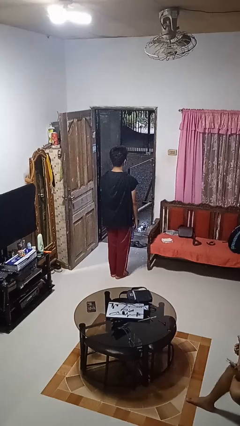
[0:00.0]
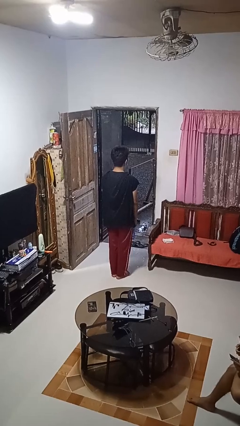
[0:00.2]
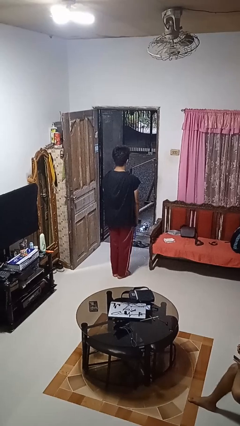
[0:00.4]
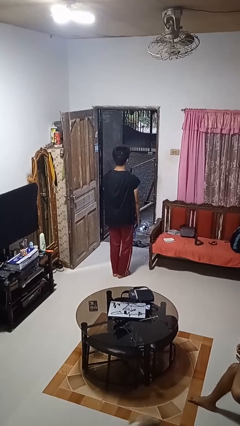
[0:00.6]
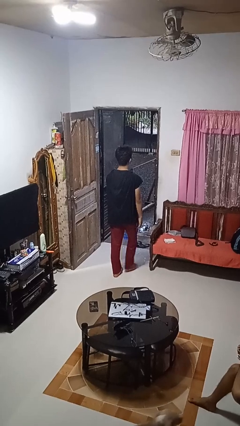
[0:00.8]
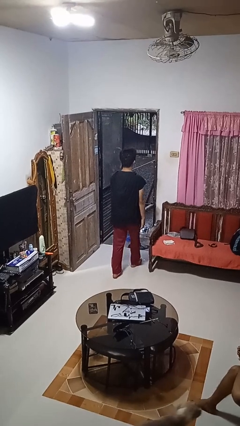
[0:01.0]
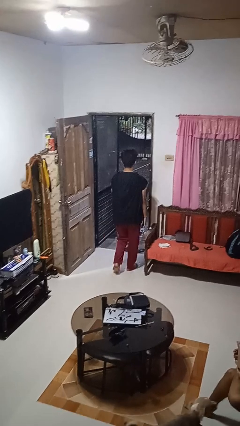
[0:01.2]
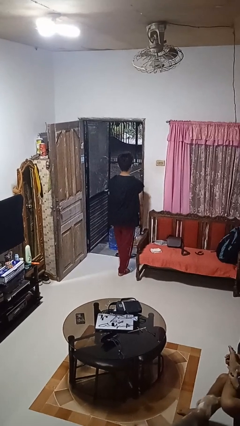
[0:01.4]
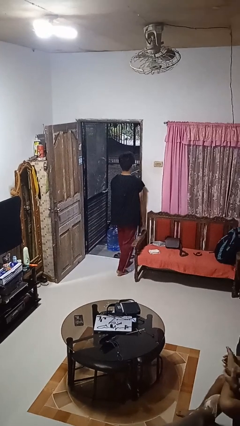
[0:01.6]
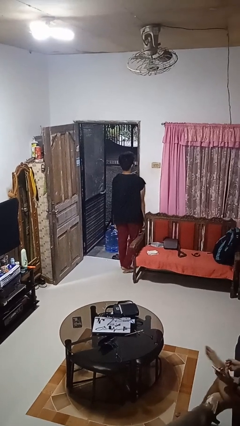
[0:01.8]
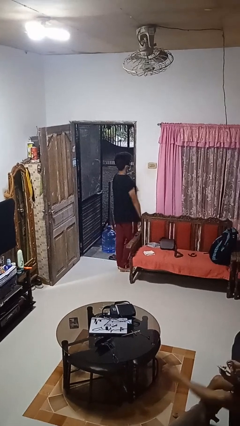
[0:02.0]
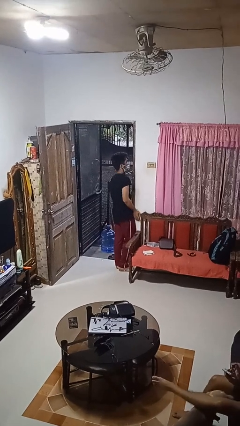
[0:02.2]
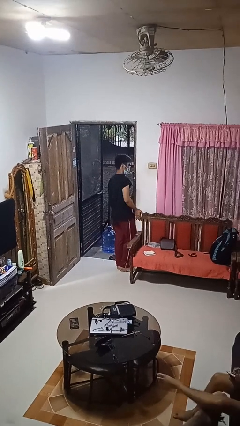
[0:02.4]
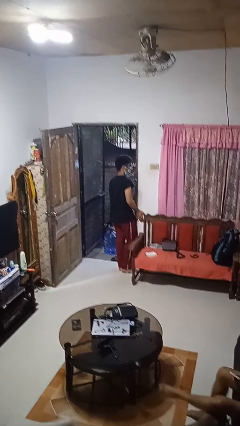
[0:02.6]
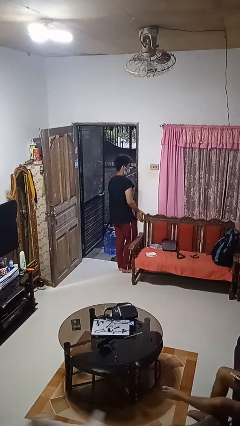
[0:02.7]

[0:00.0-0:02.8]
person bumps into wall

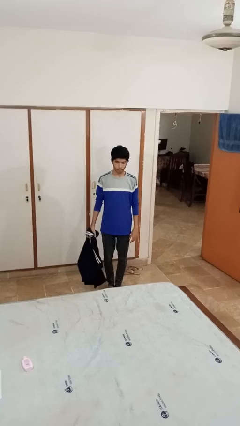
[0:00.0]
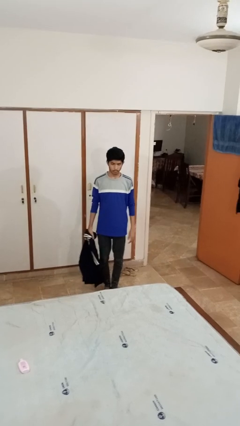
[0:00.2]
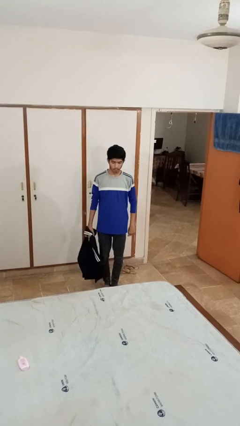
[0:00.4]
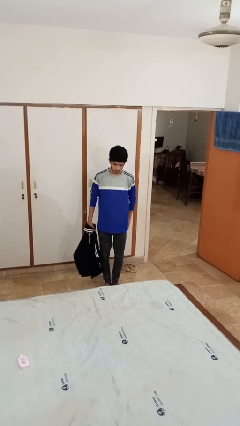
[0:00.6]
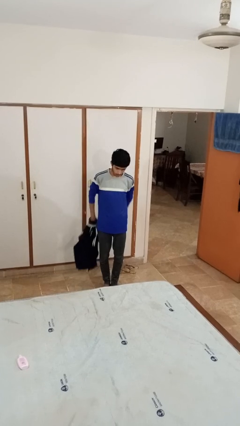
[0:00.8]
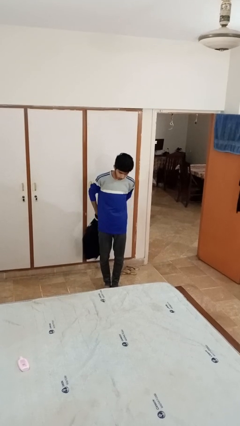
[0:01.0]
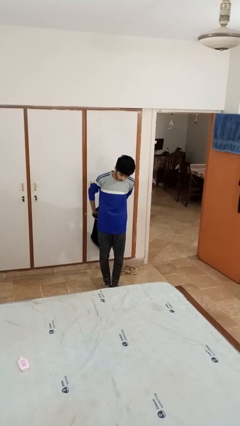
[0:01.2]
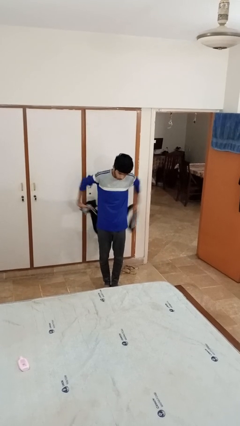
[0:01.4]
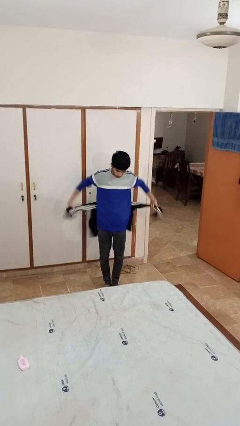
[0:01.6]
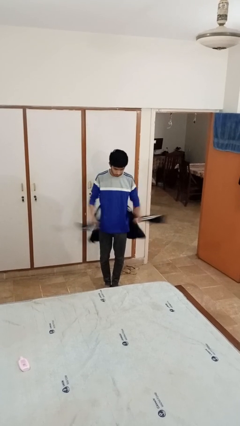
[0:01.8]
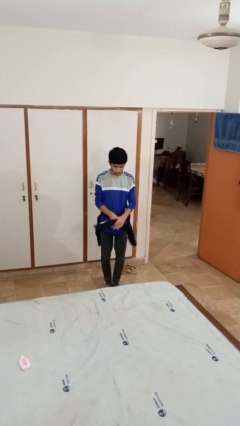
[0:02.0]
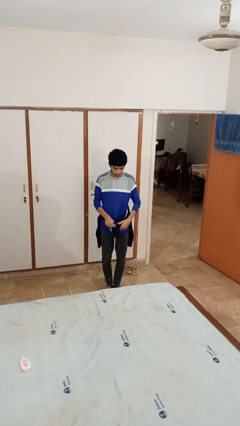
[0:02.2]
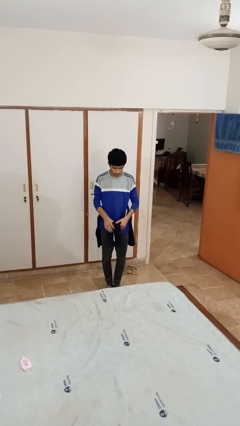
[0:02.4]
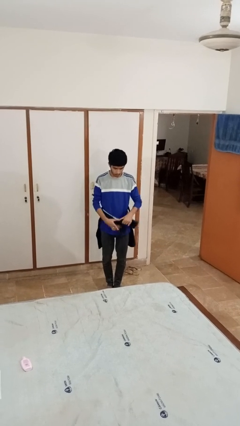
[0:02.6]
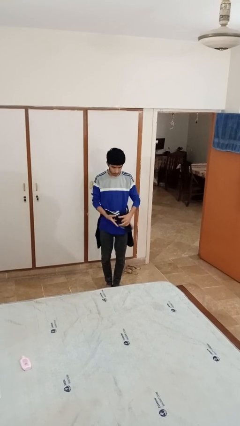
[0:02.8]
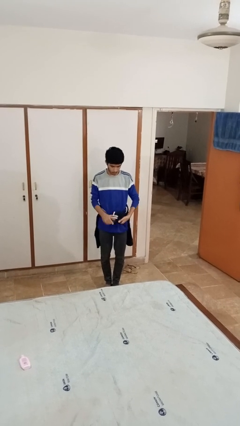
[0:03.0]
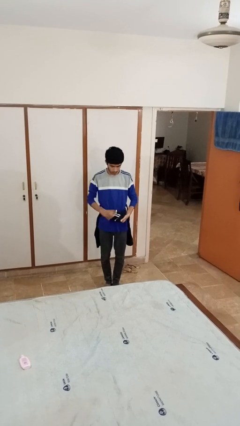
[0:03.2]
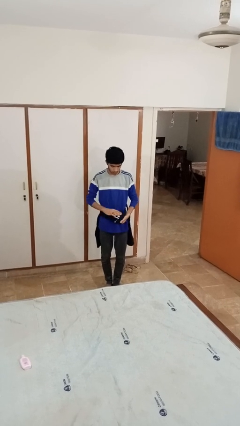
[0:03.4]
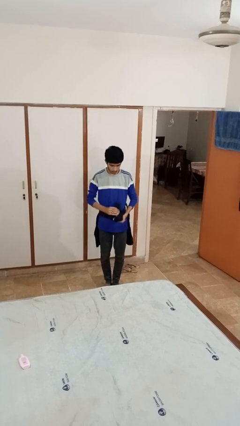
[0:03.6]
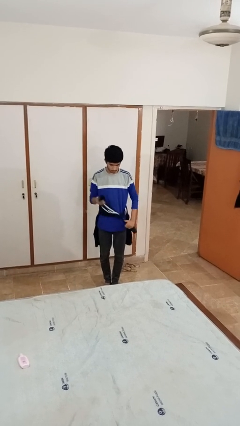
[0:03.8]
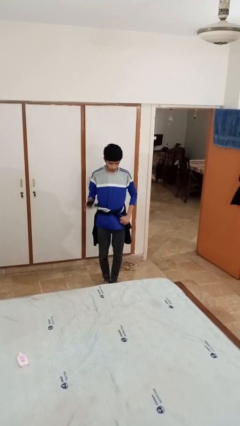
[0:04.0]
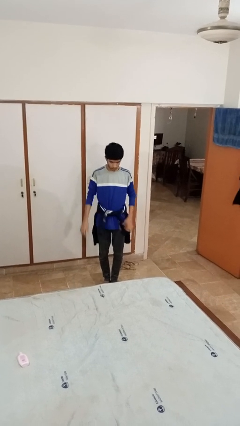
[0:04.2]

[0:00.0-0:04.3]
person ties jacket around waist

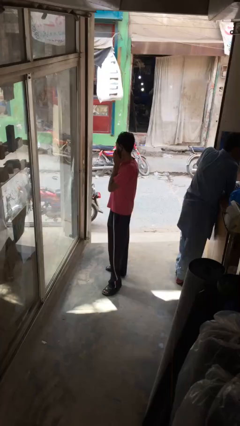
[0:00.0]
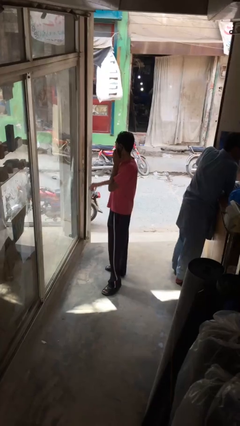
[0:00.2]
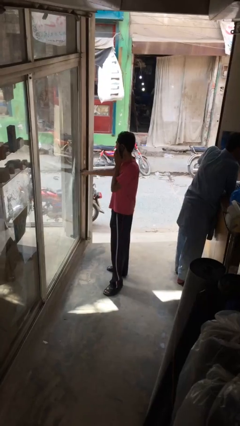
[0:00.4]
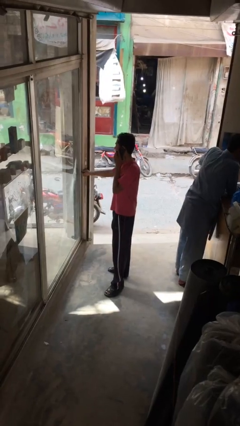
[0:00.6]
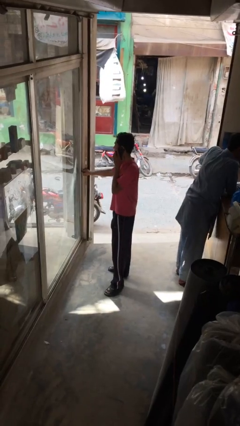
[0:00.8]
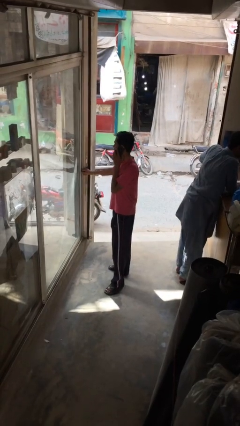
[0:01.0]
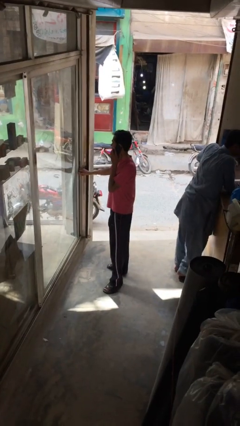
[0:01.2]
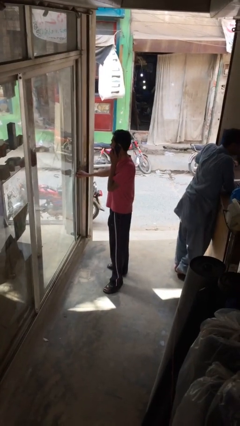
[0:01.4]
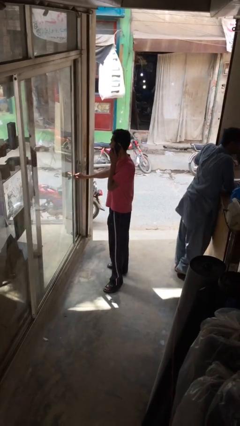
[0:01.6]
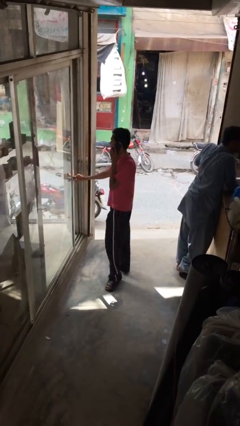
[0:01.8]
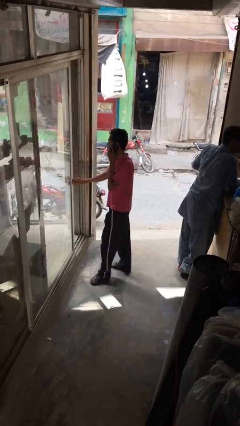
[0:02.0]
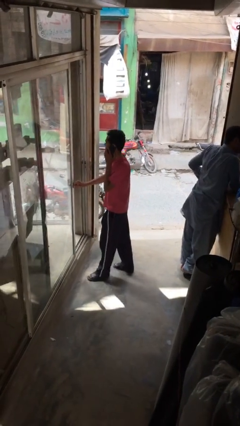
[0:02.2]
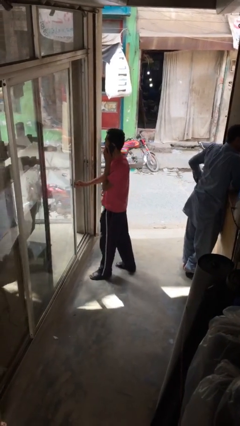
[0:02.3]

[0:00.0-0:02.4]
person opens facility door

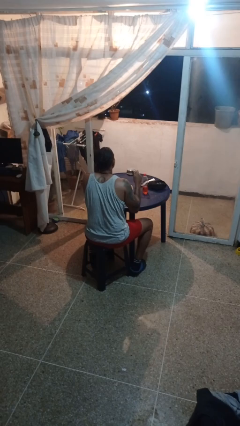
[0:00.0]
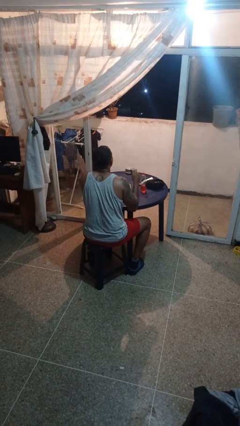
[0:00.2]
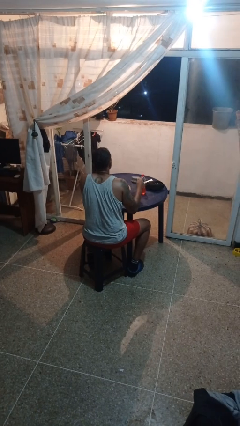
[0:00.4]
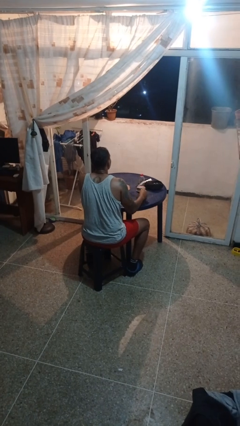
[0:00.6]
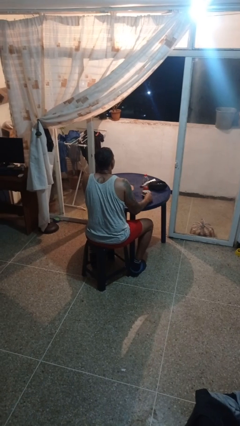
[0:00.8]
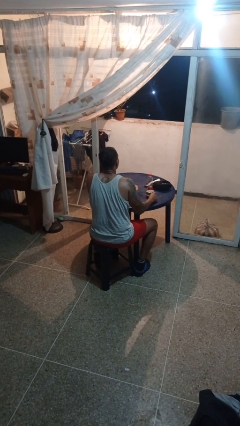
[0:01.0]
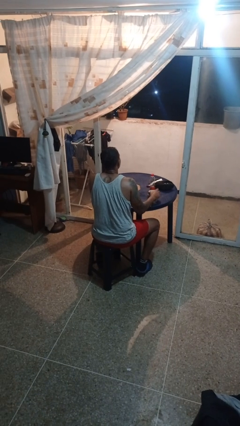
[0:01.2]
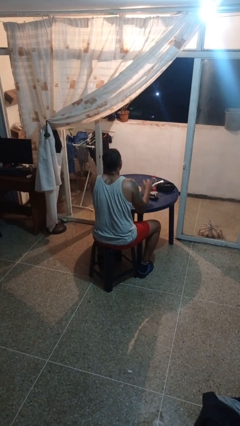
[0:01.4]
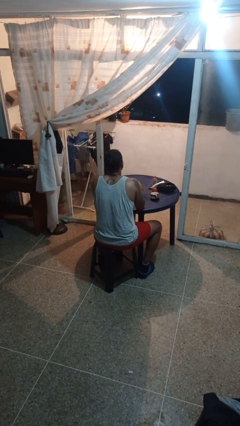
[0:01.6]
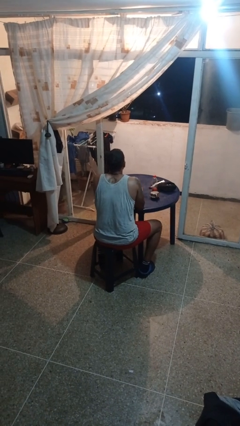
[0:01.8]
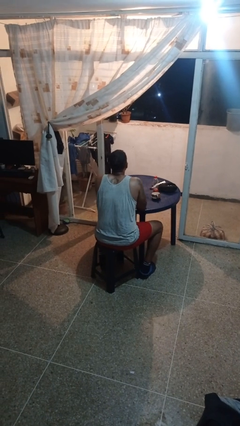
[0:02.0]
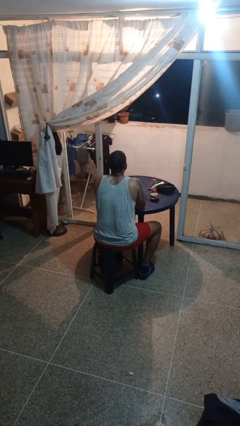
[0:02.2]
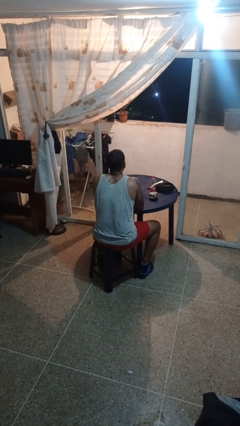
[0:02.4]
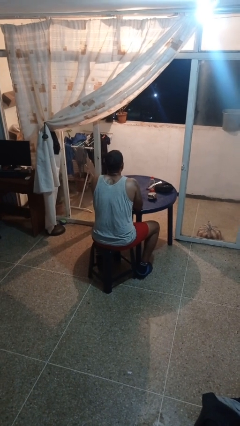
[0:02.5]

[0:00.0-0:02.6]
person puts down object on table

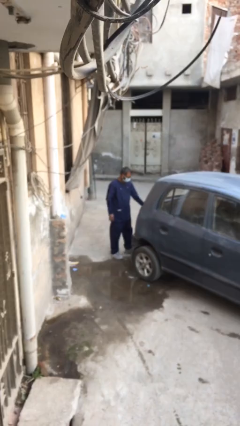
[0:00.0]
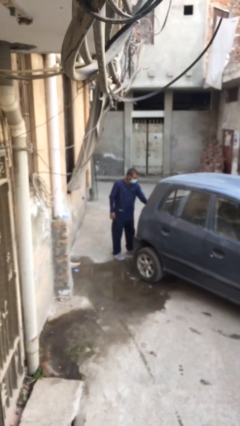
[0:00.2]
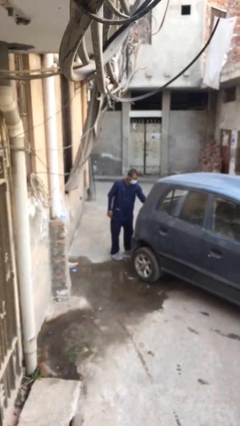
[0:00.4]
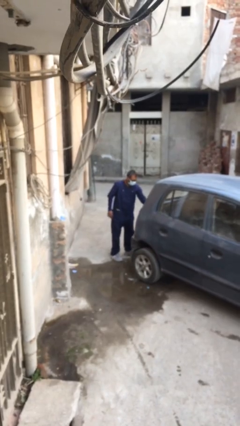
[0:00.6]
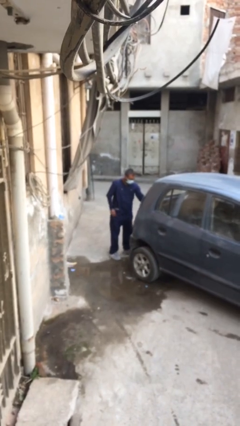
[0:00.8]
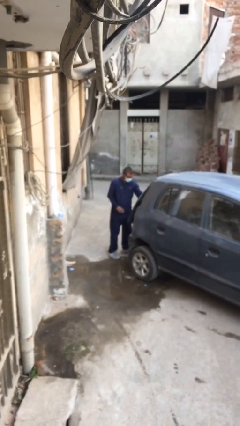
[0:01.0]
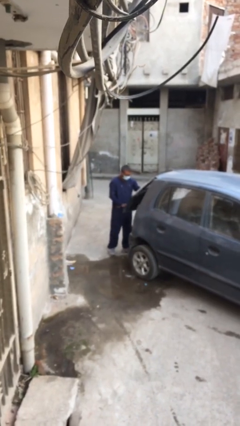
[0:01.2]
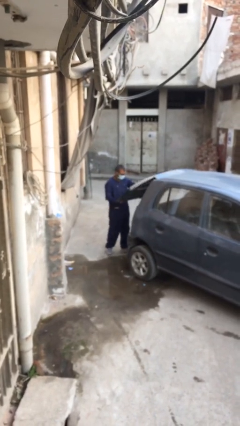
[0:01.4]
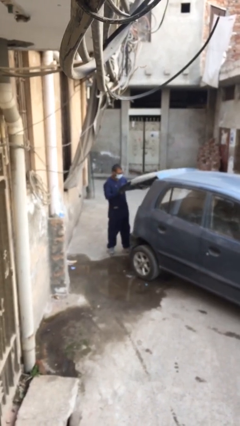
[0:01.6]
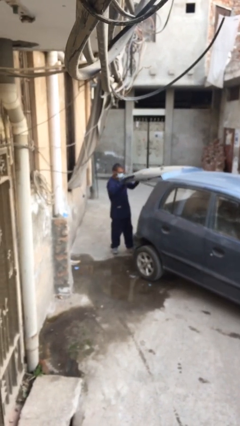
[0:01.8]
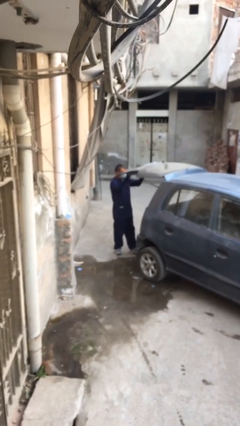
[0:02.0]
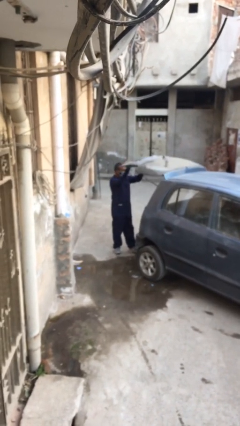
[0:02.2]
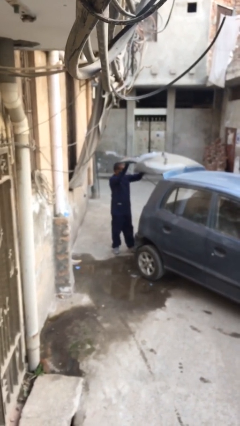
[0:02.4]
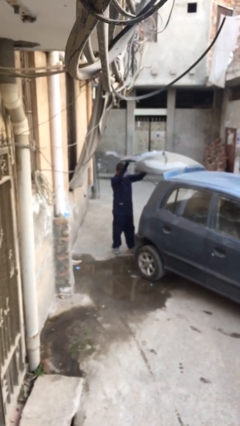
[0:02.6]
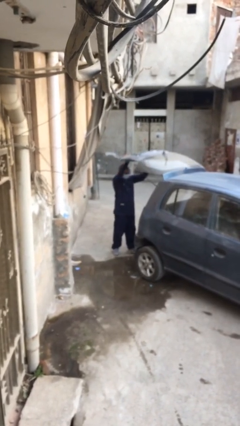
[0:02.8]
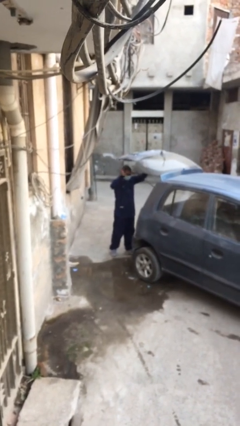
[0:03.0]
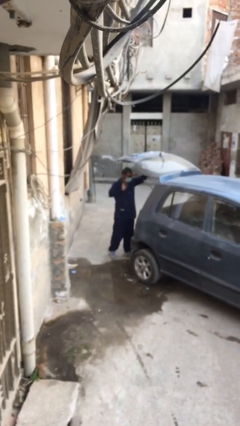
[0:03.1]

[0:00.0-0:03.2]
person opens car trunk

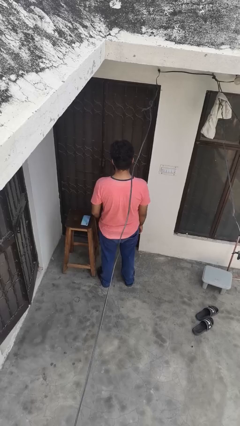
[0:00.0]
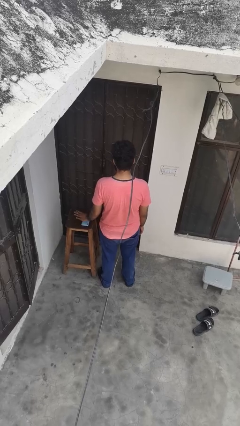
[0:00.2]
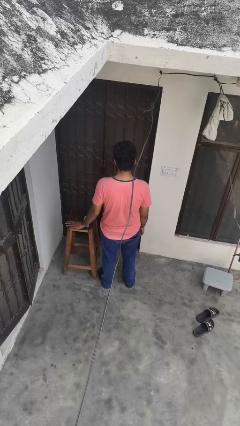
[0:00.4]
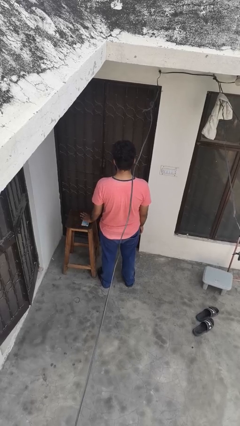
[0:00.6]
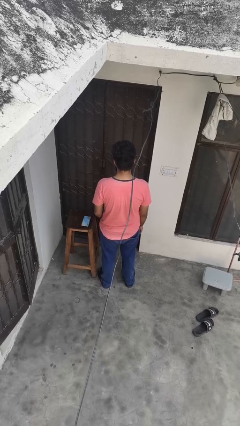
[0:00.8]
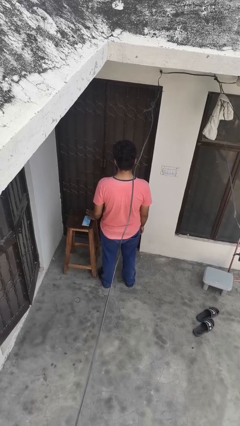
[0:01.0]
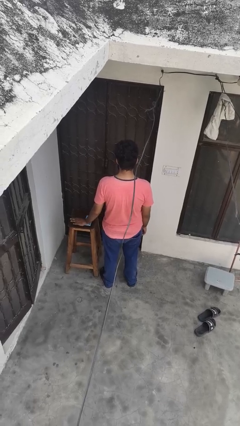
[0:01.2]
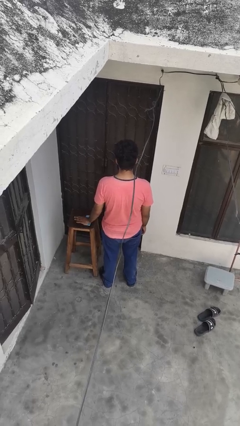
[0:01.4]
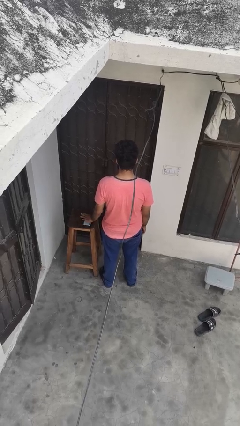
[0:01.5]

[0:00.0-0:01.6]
person waves hand over object

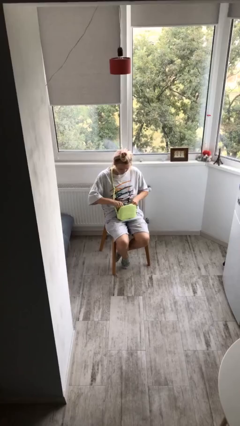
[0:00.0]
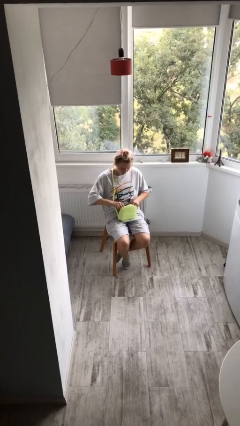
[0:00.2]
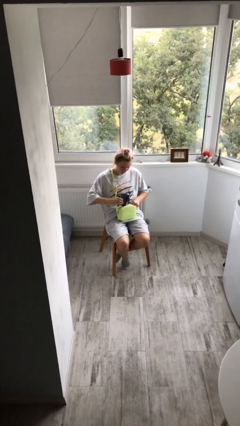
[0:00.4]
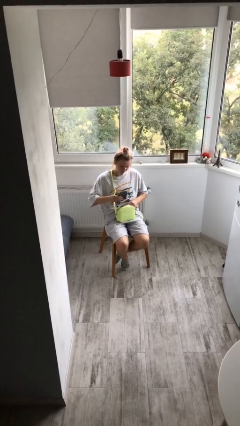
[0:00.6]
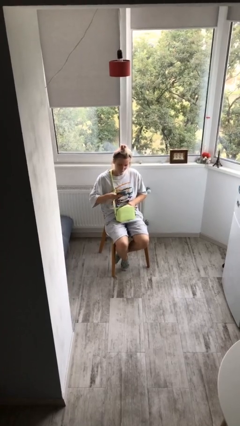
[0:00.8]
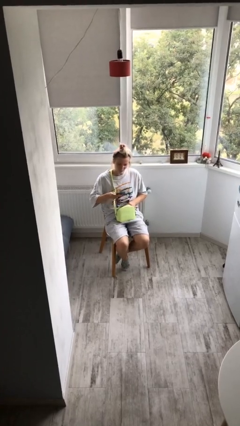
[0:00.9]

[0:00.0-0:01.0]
person takes object from purse
